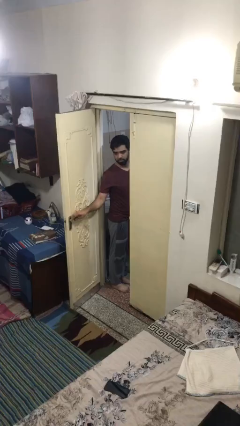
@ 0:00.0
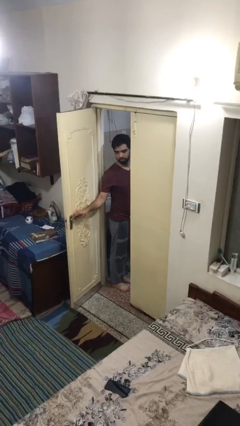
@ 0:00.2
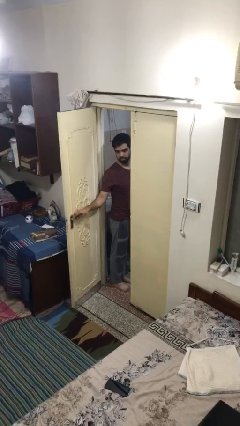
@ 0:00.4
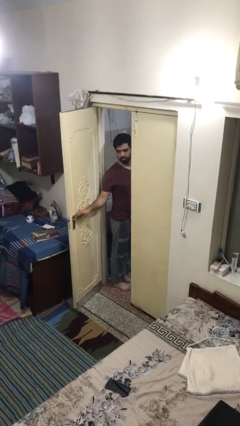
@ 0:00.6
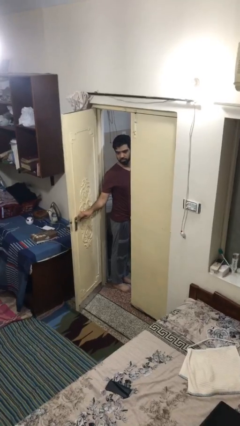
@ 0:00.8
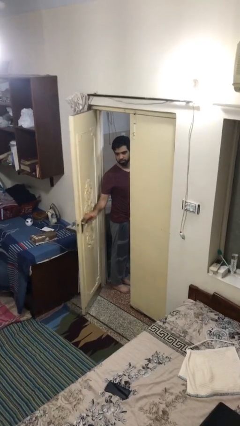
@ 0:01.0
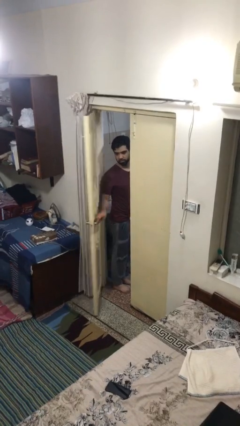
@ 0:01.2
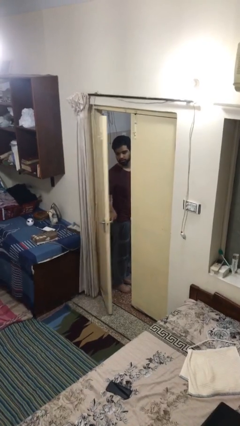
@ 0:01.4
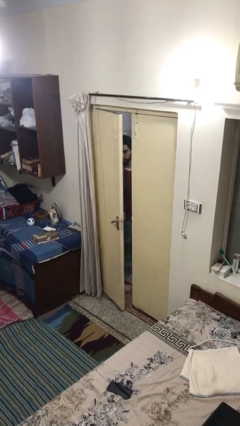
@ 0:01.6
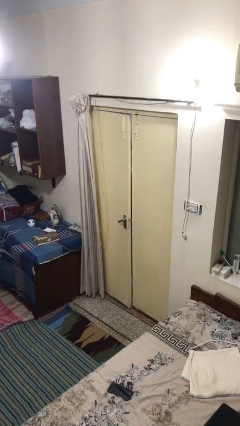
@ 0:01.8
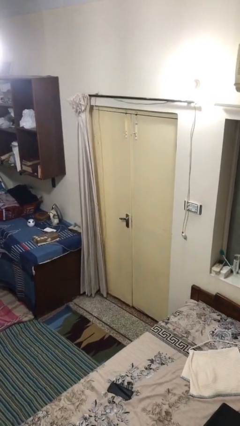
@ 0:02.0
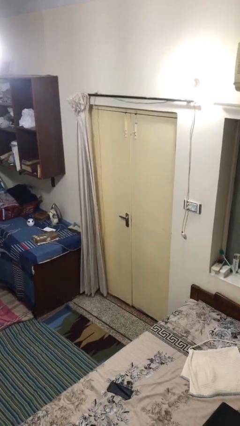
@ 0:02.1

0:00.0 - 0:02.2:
person closes facility door

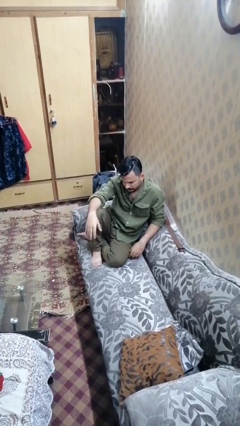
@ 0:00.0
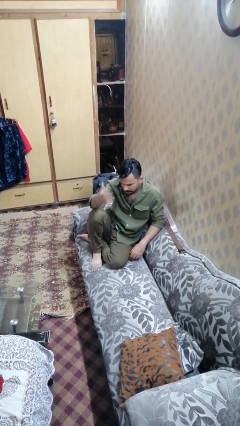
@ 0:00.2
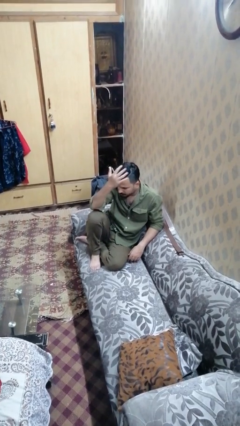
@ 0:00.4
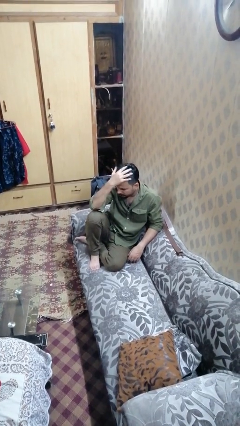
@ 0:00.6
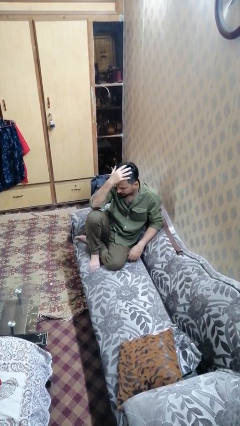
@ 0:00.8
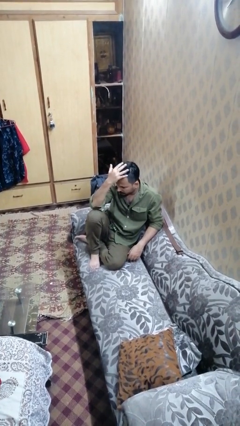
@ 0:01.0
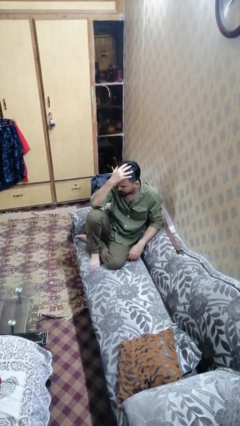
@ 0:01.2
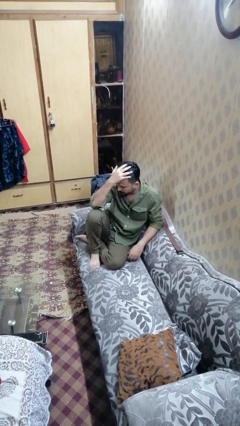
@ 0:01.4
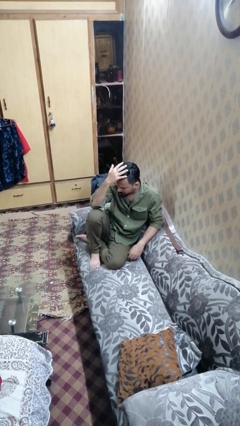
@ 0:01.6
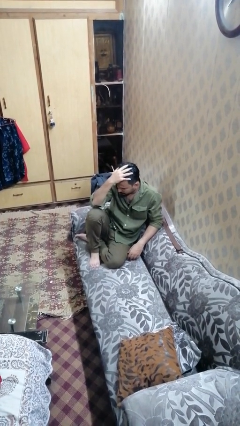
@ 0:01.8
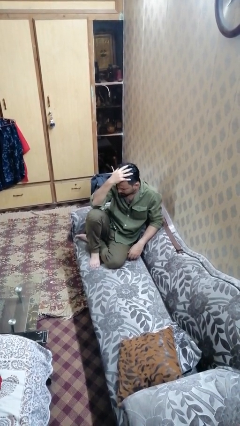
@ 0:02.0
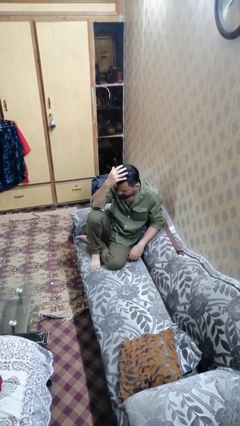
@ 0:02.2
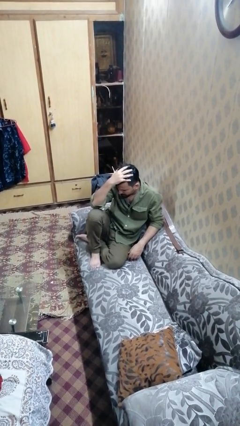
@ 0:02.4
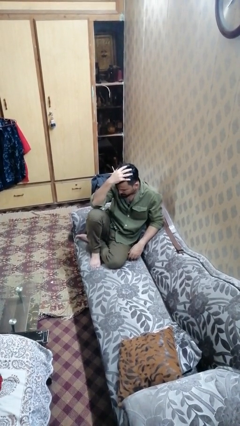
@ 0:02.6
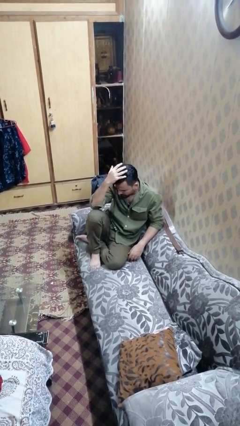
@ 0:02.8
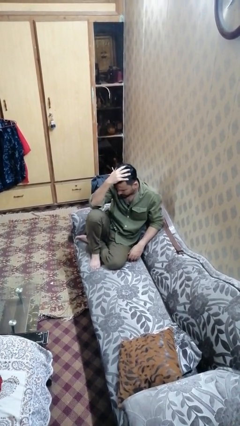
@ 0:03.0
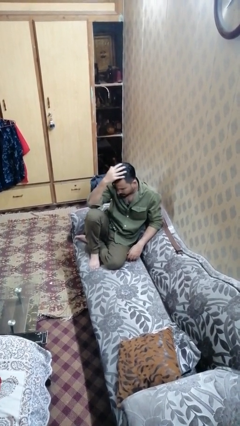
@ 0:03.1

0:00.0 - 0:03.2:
person pats head

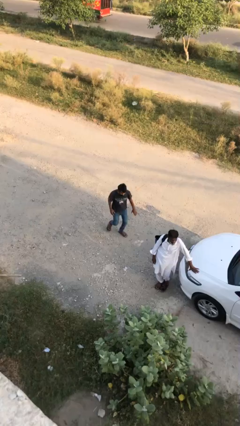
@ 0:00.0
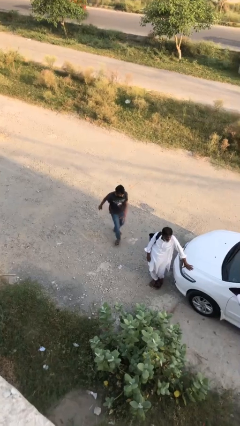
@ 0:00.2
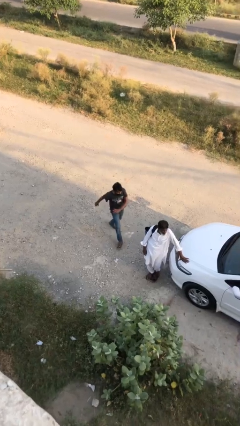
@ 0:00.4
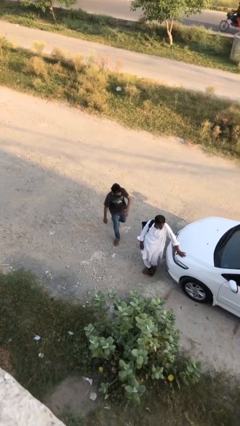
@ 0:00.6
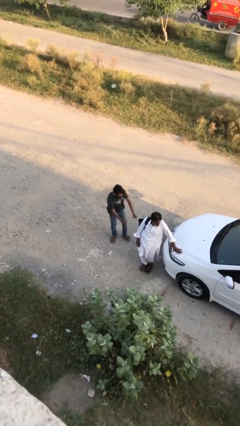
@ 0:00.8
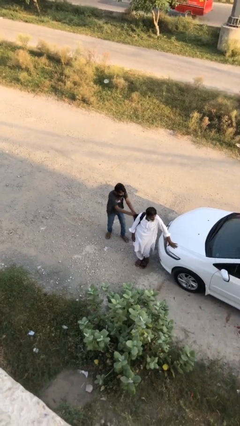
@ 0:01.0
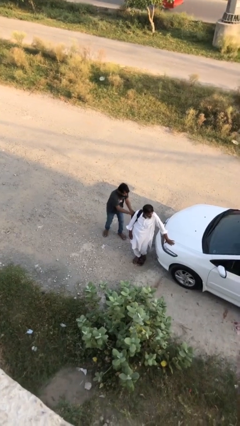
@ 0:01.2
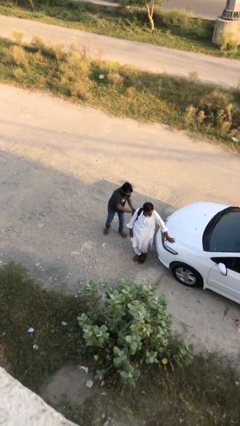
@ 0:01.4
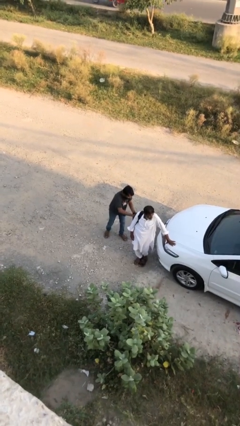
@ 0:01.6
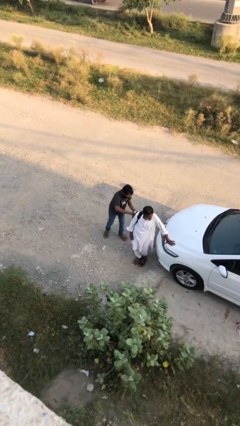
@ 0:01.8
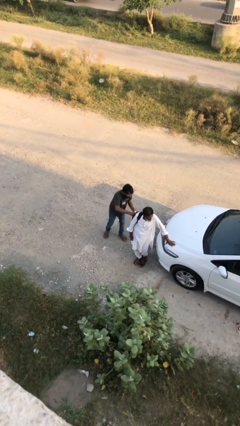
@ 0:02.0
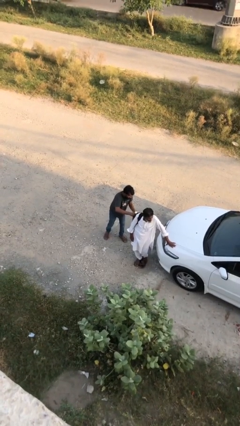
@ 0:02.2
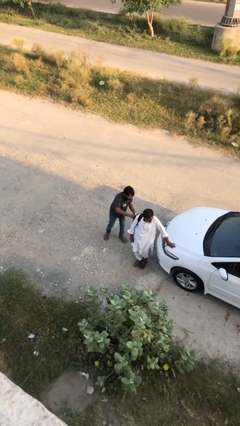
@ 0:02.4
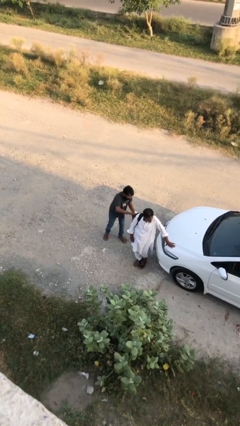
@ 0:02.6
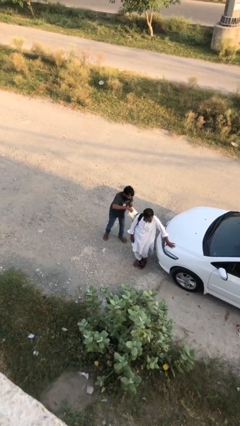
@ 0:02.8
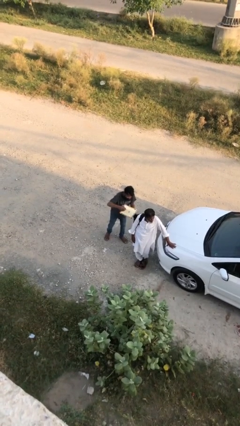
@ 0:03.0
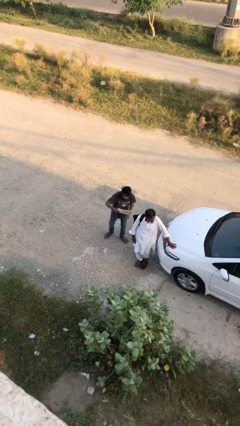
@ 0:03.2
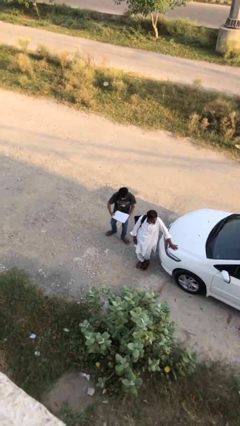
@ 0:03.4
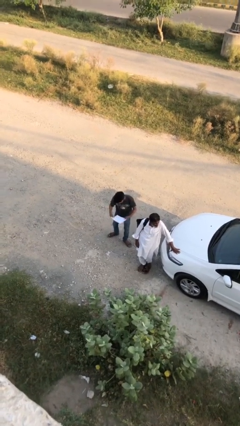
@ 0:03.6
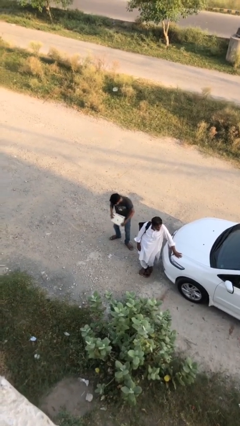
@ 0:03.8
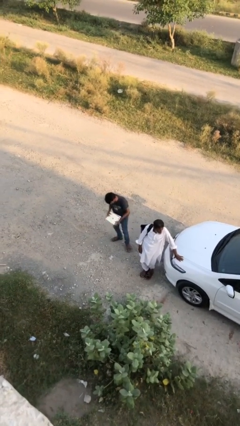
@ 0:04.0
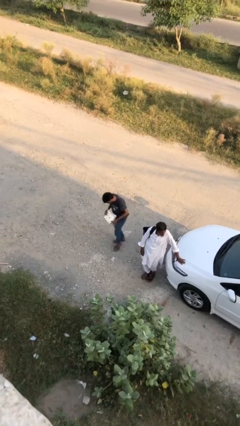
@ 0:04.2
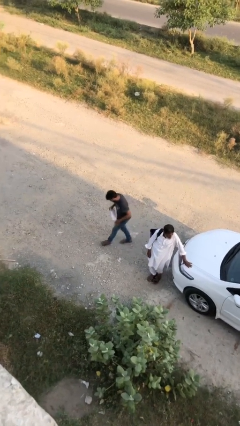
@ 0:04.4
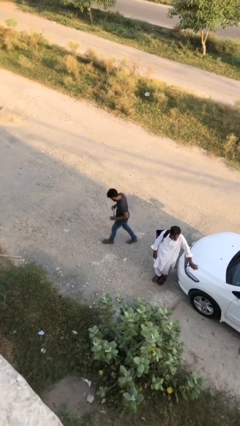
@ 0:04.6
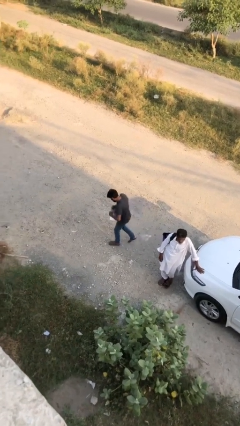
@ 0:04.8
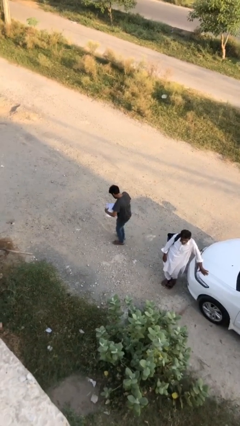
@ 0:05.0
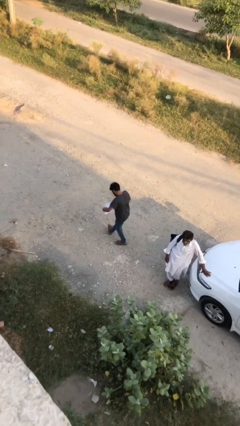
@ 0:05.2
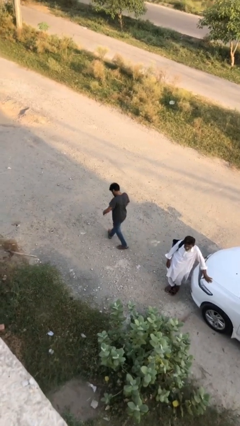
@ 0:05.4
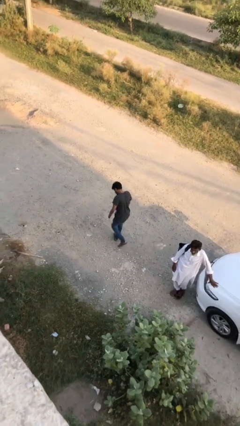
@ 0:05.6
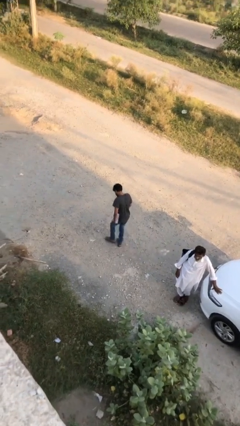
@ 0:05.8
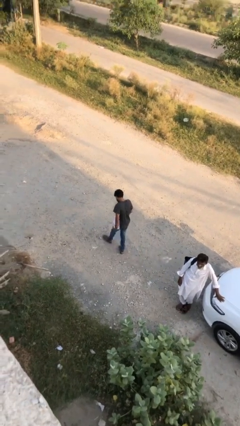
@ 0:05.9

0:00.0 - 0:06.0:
person steals object from person

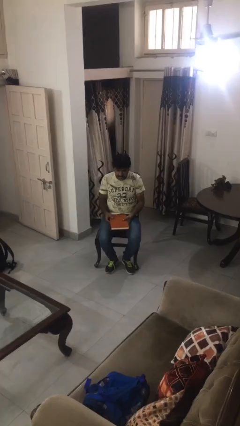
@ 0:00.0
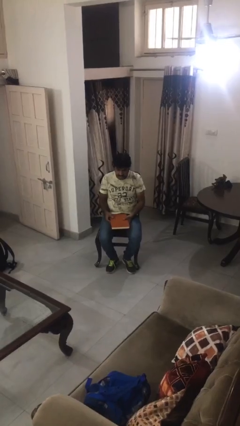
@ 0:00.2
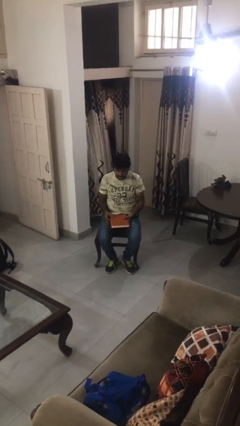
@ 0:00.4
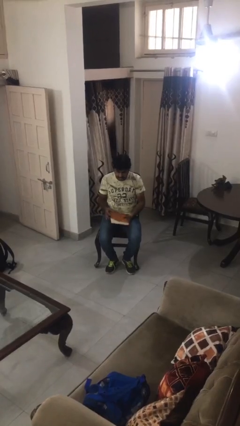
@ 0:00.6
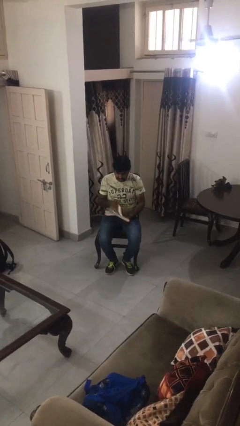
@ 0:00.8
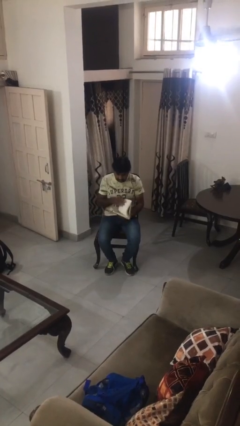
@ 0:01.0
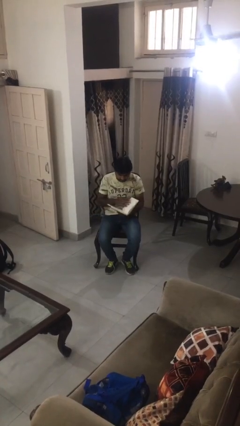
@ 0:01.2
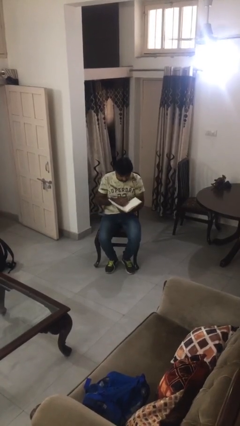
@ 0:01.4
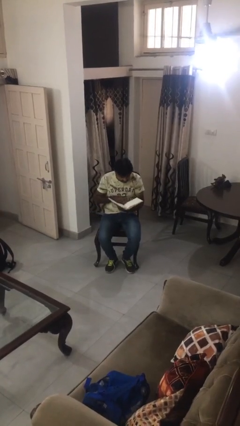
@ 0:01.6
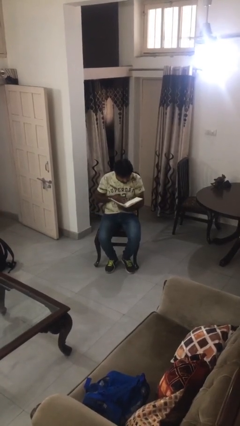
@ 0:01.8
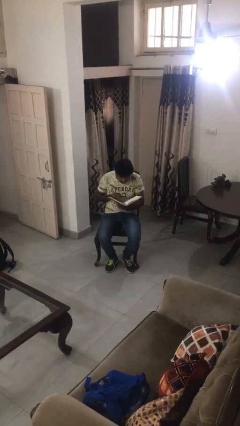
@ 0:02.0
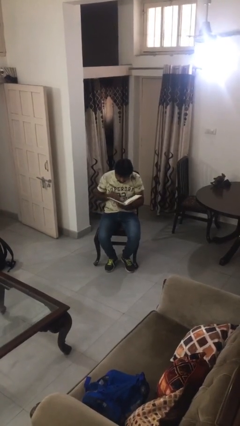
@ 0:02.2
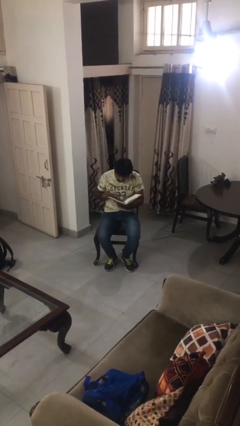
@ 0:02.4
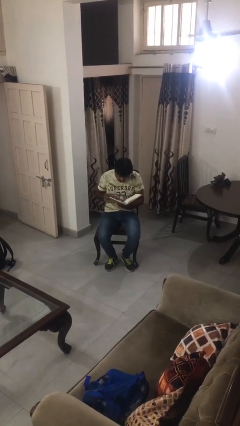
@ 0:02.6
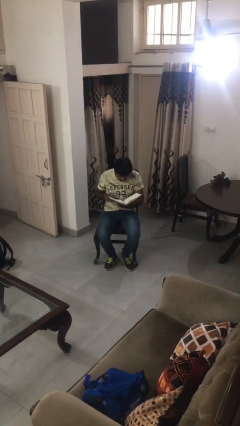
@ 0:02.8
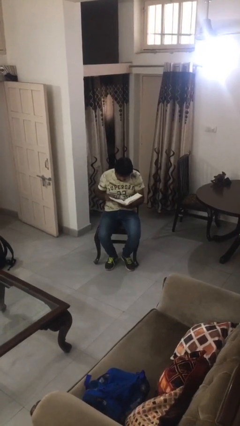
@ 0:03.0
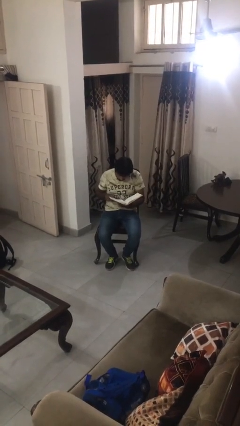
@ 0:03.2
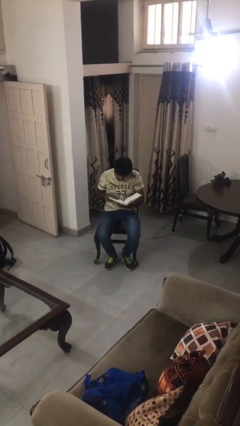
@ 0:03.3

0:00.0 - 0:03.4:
person reads book

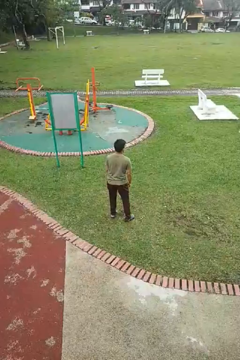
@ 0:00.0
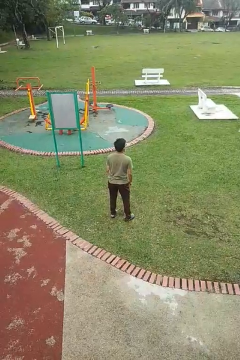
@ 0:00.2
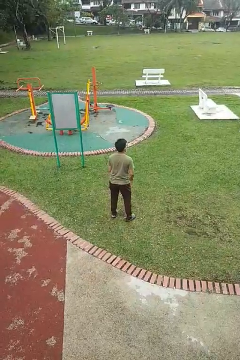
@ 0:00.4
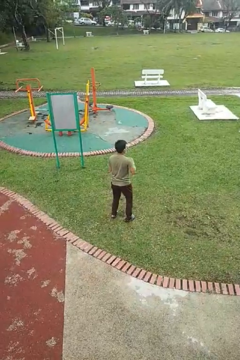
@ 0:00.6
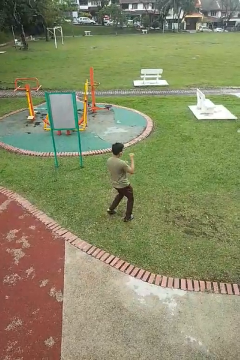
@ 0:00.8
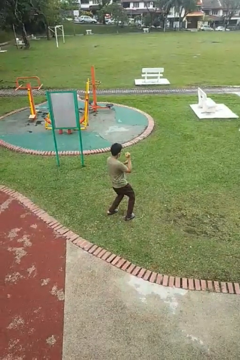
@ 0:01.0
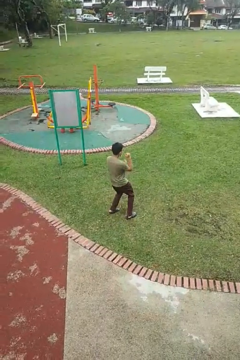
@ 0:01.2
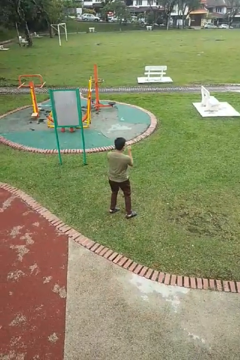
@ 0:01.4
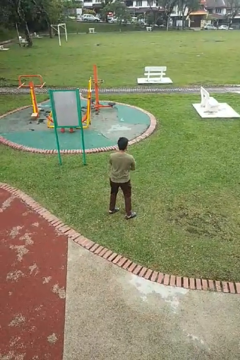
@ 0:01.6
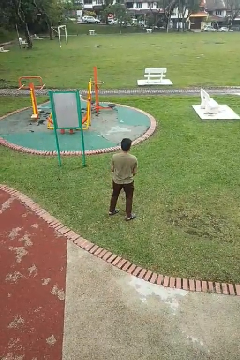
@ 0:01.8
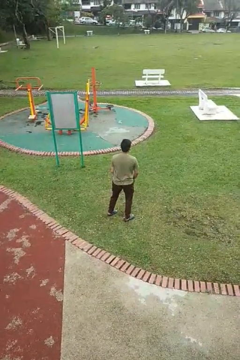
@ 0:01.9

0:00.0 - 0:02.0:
person dances in place

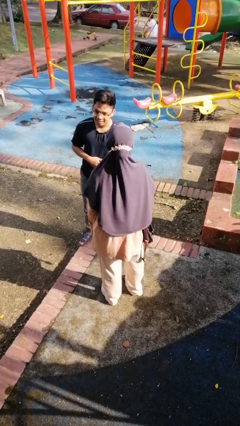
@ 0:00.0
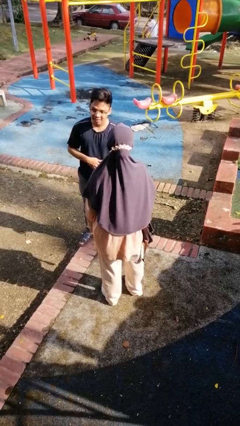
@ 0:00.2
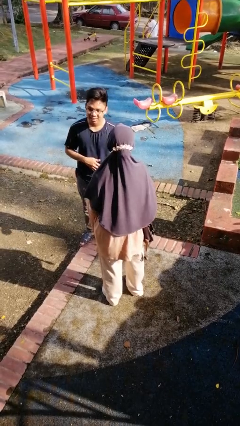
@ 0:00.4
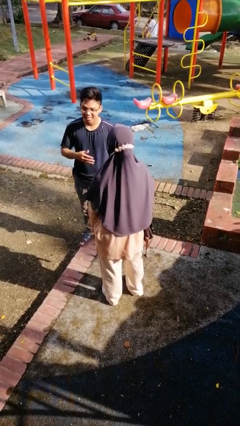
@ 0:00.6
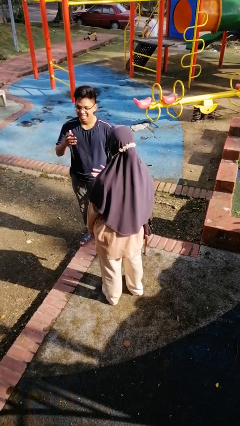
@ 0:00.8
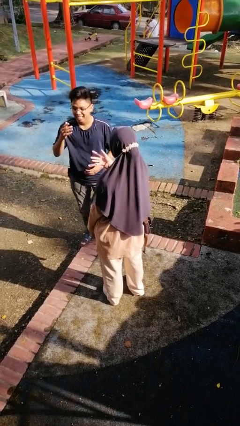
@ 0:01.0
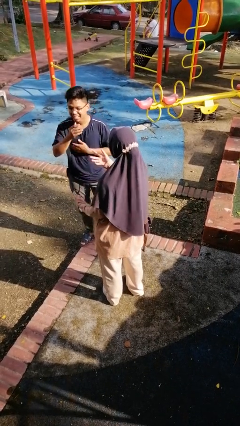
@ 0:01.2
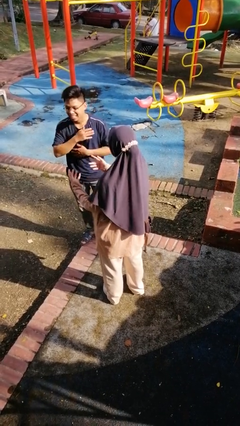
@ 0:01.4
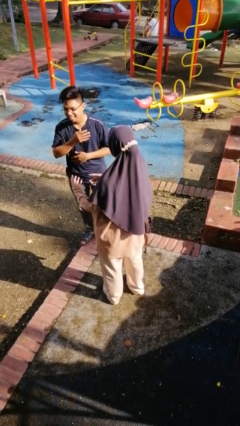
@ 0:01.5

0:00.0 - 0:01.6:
person laughs with person
